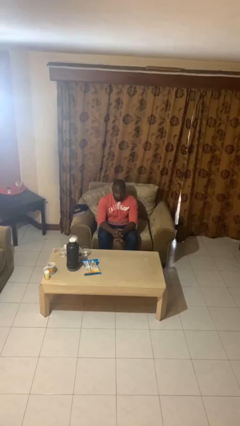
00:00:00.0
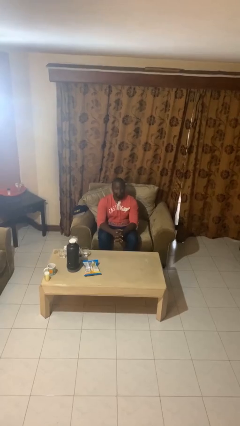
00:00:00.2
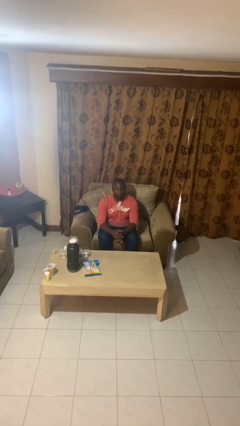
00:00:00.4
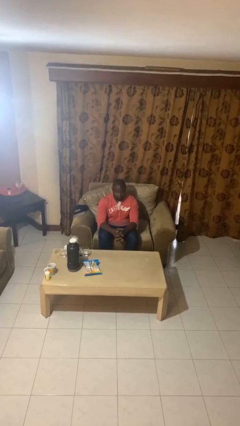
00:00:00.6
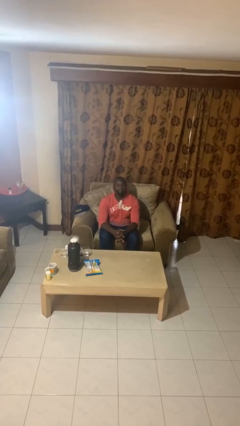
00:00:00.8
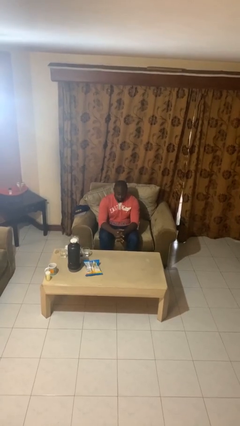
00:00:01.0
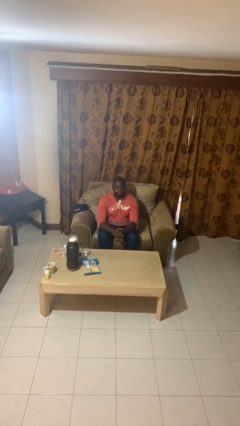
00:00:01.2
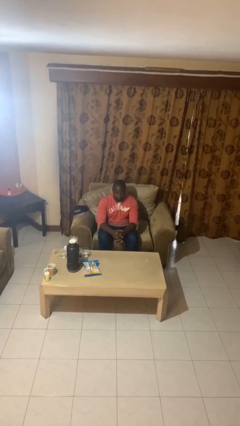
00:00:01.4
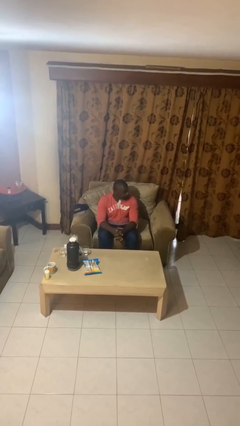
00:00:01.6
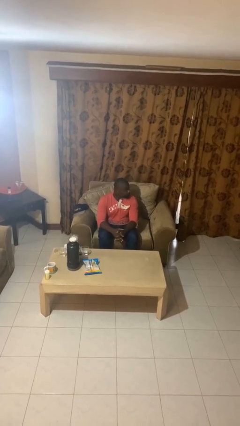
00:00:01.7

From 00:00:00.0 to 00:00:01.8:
person nods head

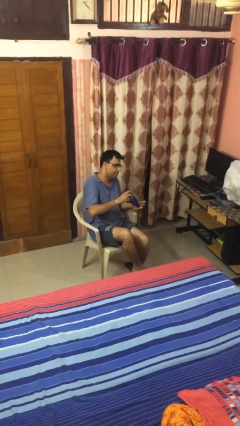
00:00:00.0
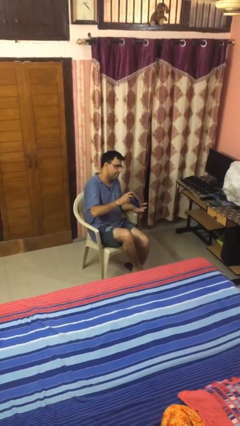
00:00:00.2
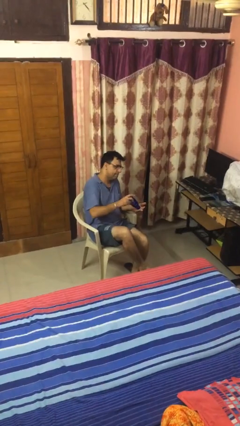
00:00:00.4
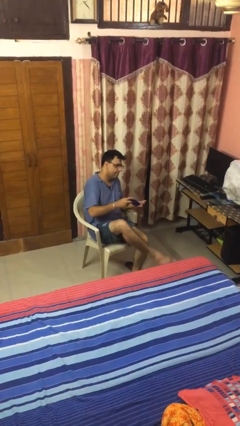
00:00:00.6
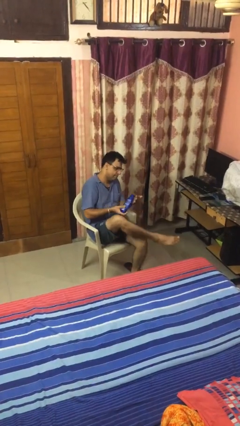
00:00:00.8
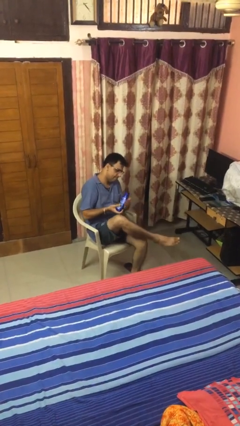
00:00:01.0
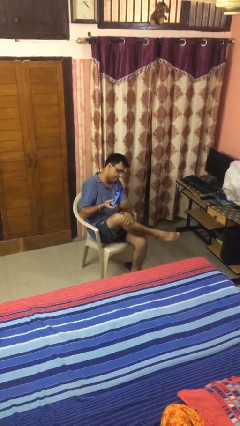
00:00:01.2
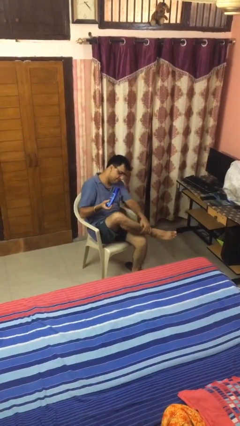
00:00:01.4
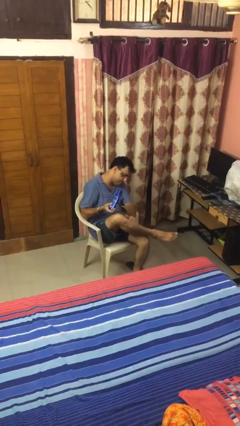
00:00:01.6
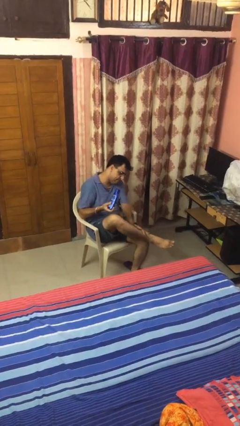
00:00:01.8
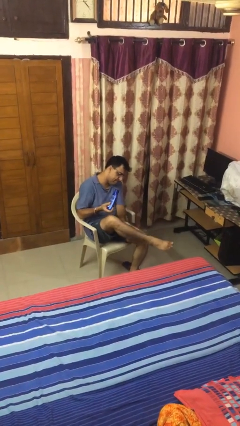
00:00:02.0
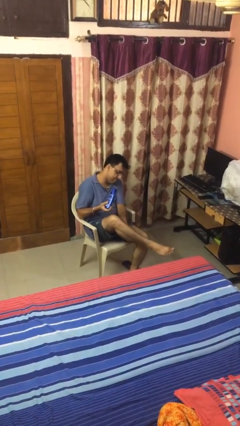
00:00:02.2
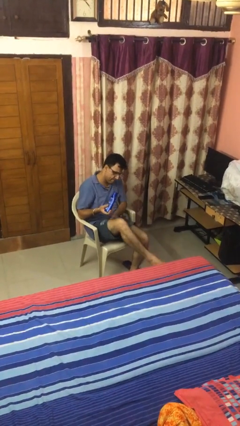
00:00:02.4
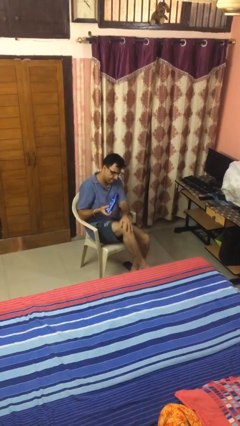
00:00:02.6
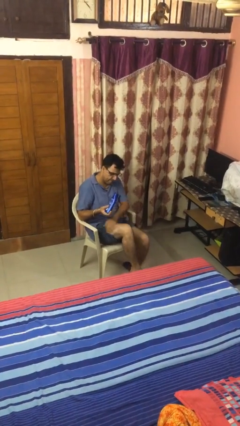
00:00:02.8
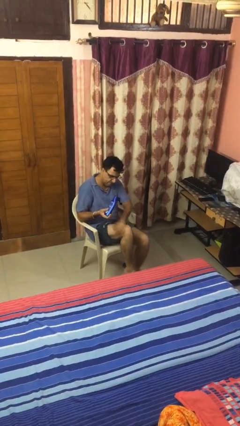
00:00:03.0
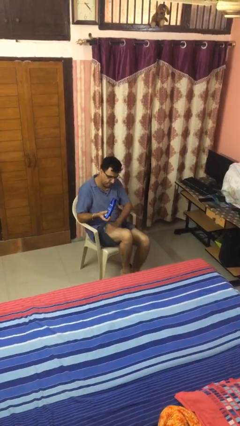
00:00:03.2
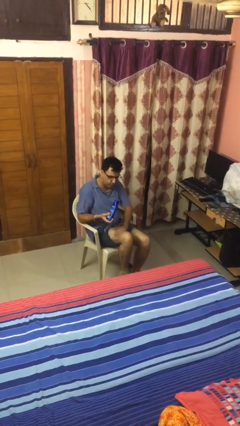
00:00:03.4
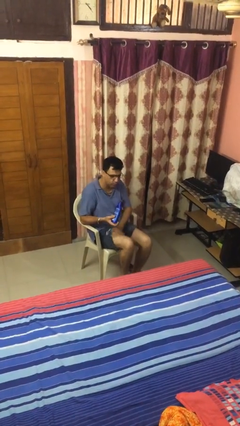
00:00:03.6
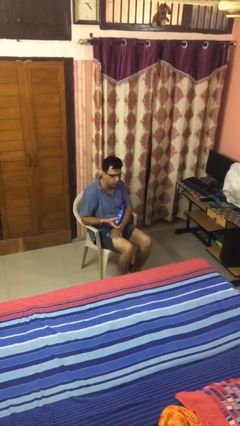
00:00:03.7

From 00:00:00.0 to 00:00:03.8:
person applies sunscreen

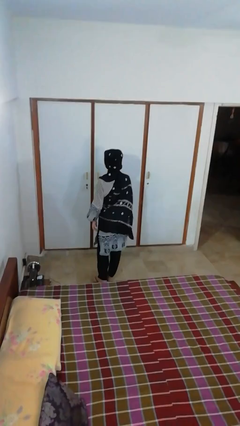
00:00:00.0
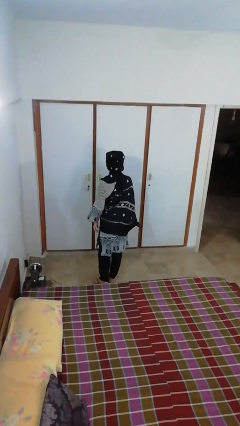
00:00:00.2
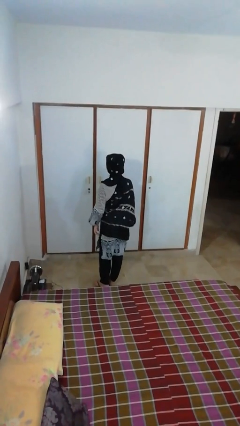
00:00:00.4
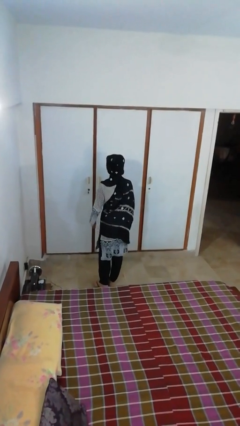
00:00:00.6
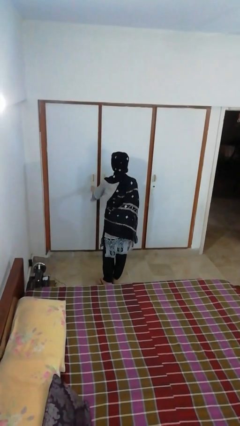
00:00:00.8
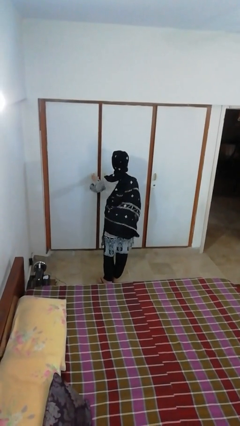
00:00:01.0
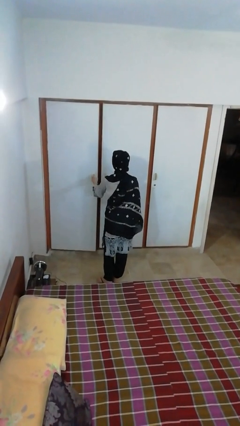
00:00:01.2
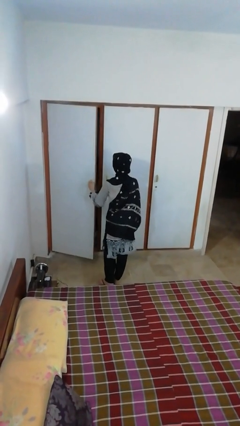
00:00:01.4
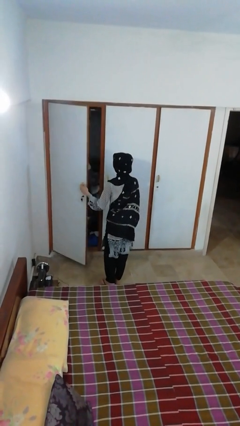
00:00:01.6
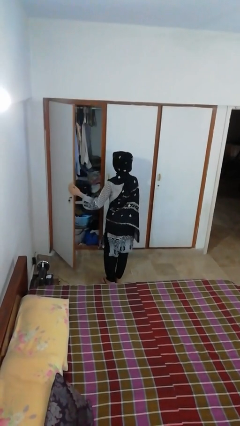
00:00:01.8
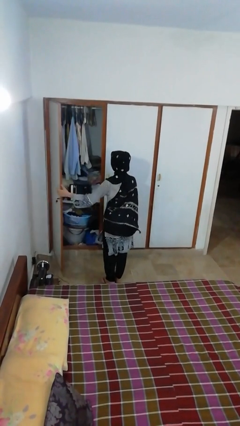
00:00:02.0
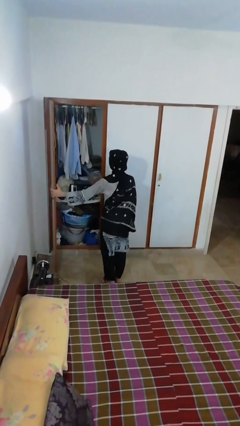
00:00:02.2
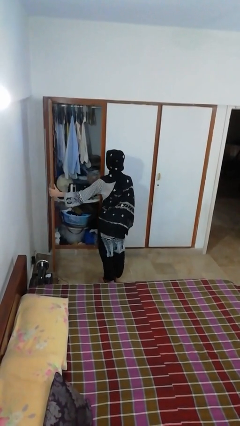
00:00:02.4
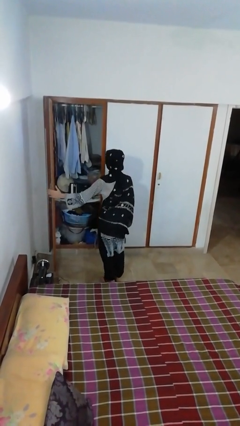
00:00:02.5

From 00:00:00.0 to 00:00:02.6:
person opens closet door

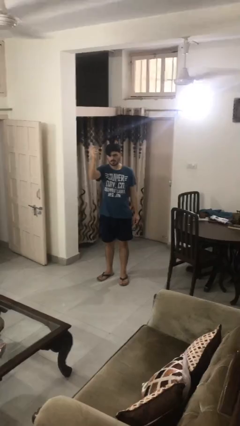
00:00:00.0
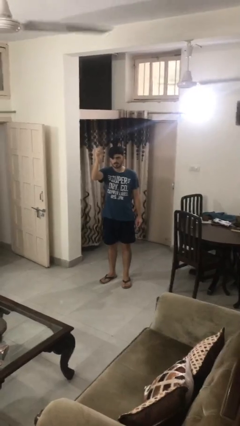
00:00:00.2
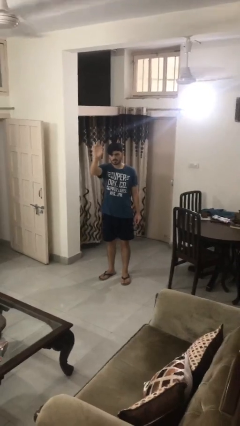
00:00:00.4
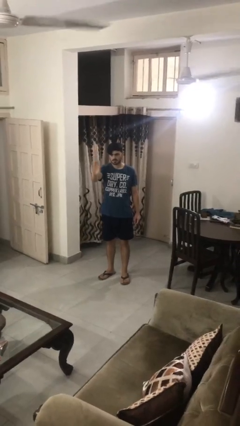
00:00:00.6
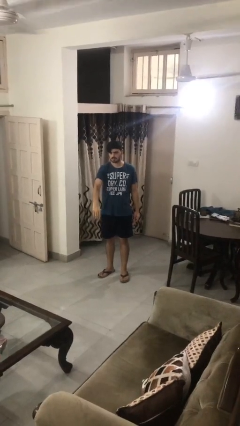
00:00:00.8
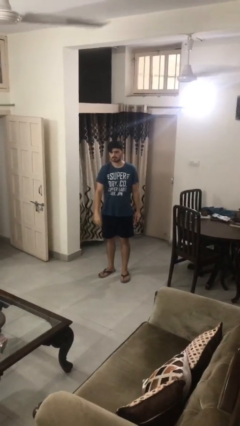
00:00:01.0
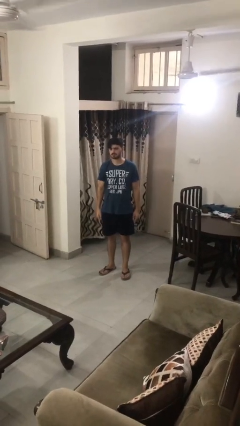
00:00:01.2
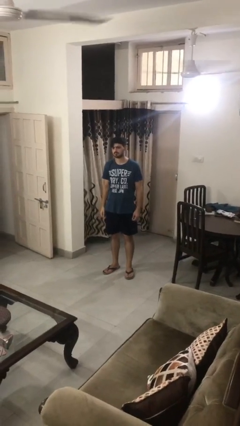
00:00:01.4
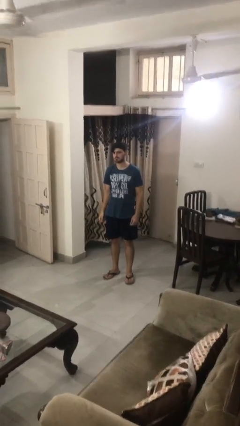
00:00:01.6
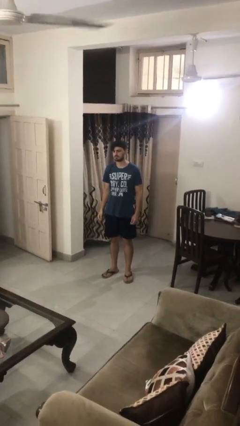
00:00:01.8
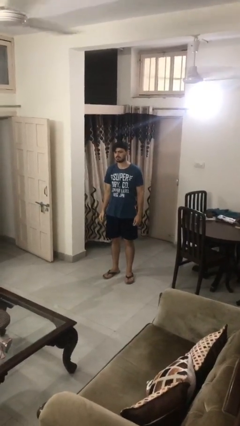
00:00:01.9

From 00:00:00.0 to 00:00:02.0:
person gestures swipe down

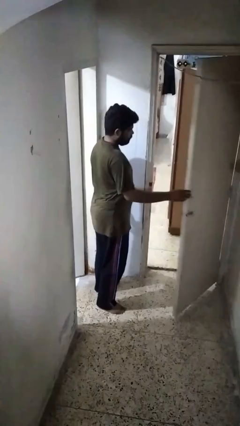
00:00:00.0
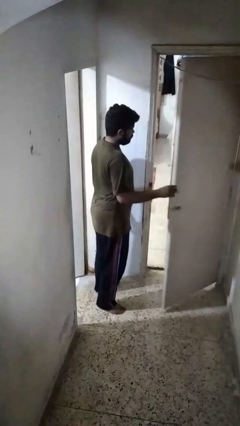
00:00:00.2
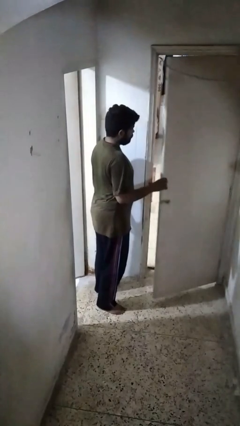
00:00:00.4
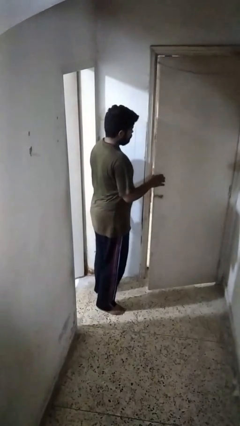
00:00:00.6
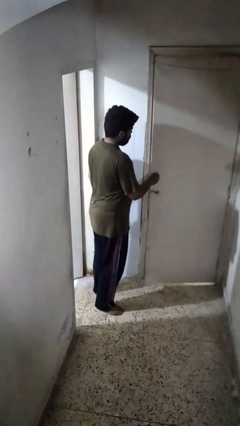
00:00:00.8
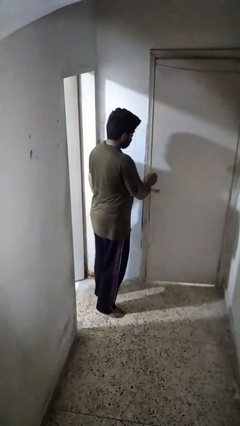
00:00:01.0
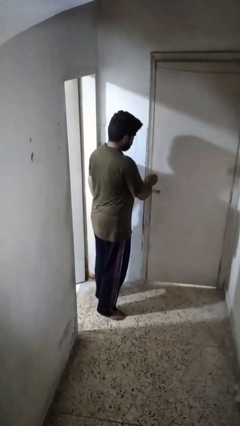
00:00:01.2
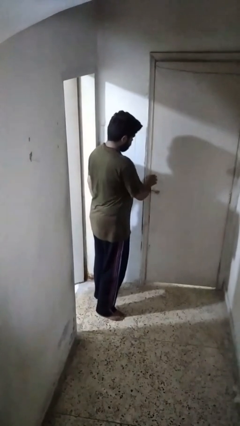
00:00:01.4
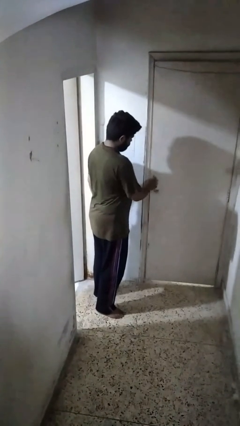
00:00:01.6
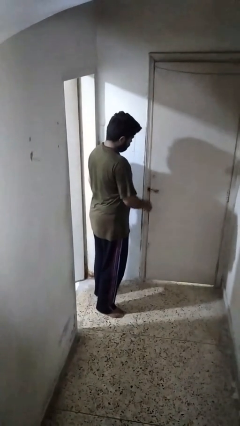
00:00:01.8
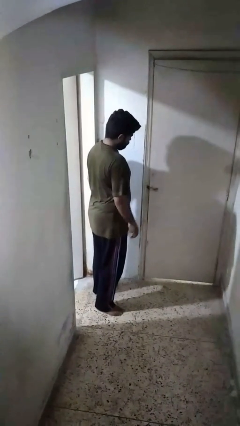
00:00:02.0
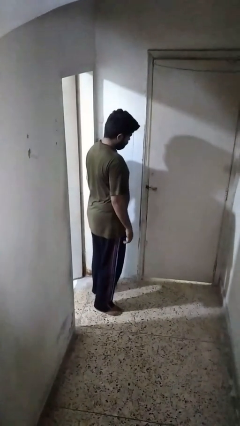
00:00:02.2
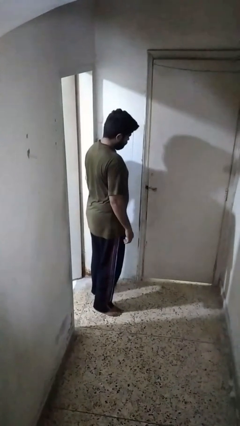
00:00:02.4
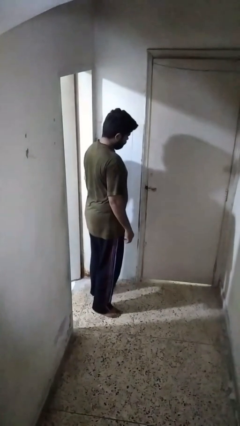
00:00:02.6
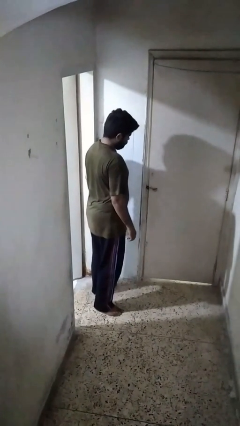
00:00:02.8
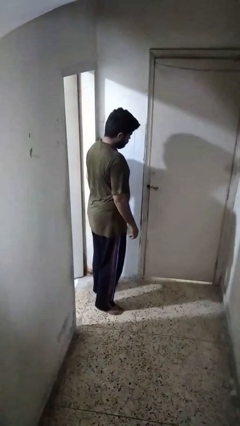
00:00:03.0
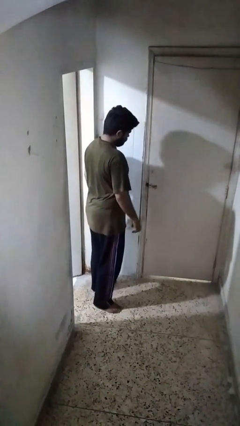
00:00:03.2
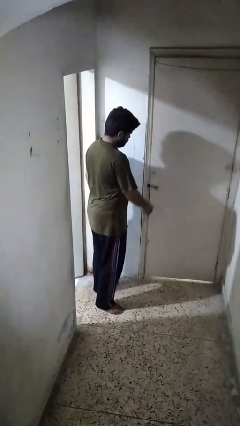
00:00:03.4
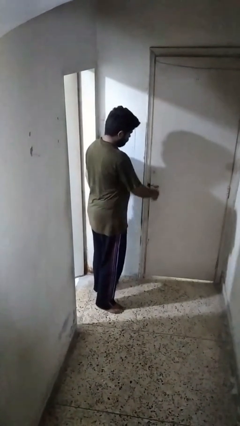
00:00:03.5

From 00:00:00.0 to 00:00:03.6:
person closes facility door

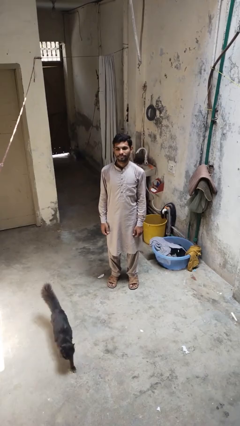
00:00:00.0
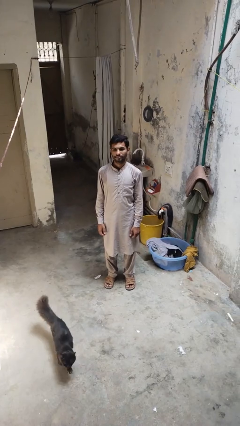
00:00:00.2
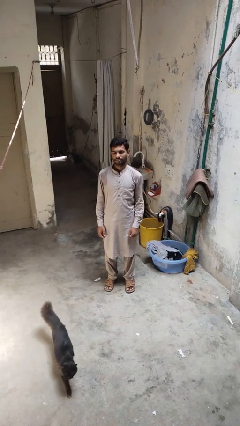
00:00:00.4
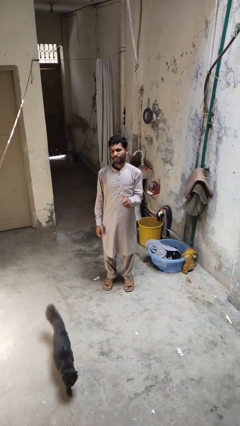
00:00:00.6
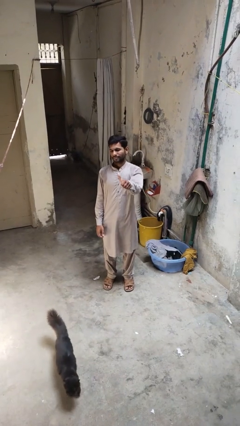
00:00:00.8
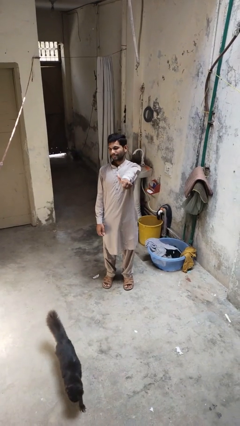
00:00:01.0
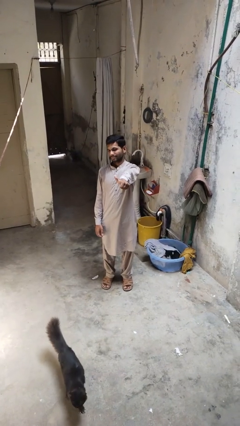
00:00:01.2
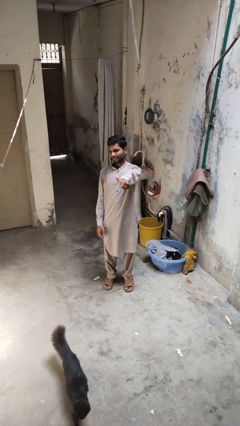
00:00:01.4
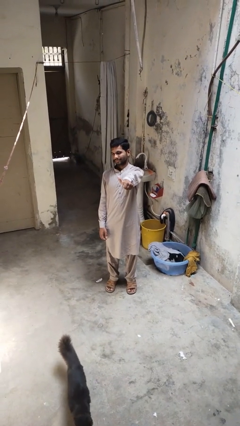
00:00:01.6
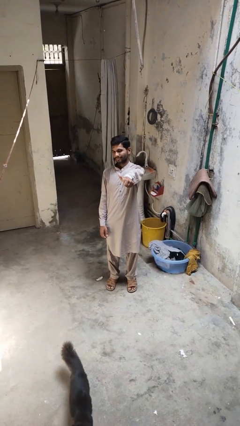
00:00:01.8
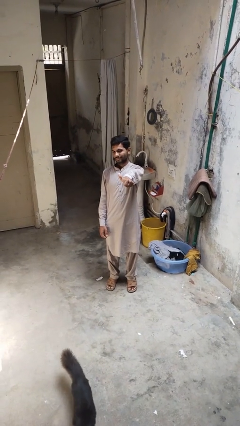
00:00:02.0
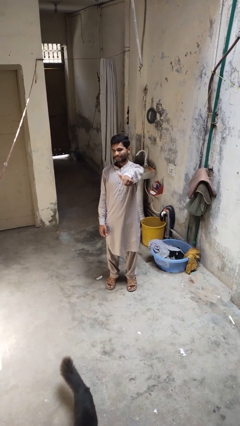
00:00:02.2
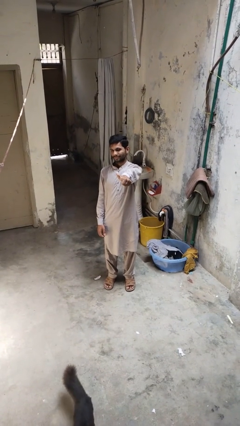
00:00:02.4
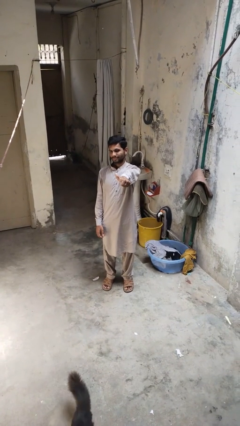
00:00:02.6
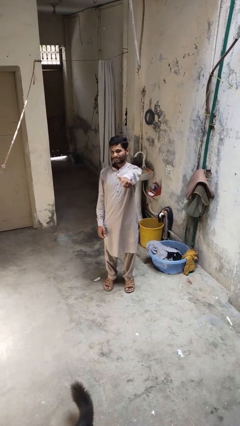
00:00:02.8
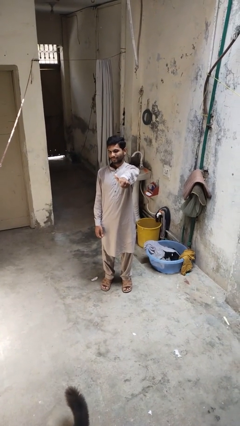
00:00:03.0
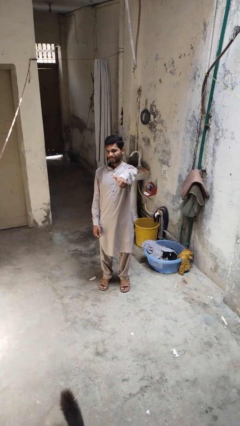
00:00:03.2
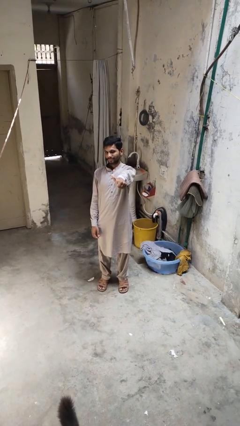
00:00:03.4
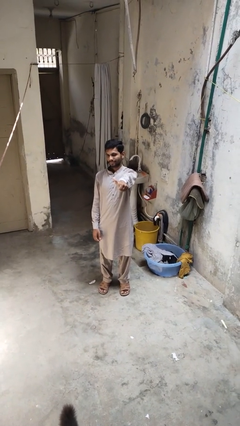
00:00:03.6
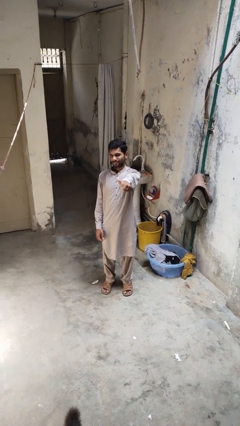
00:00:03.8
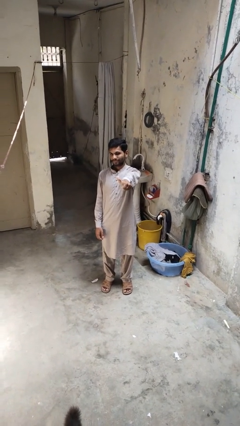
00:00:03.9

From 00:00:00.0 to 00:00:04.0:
person gestures thumbs up
